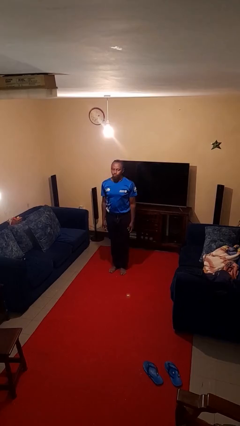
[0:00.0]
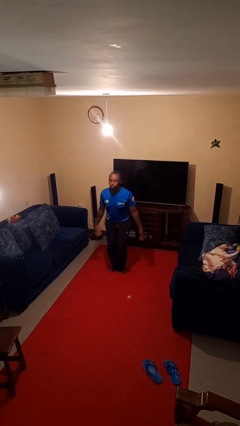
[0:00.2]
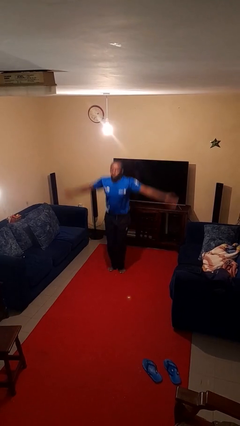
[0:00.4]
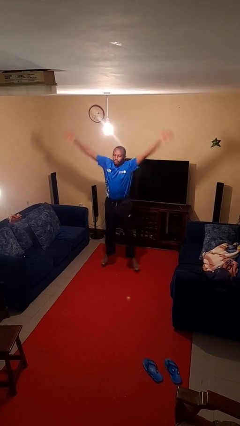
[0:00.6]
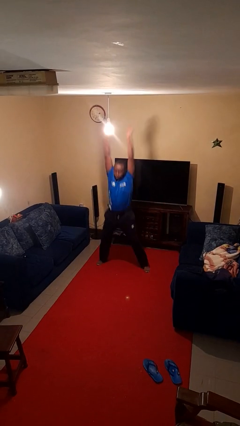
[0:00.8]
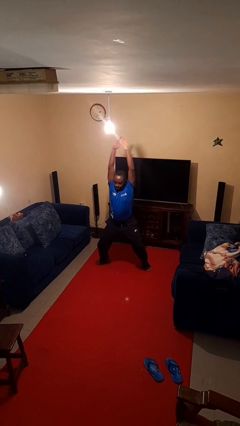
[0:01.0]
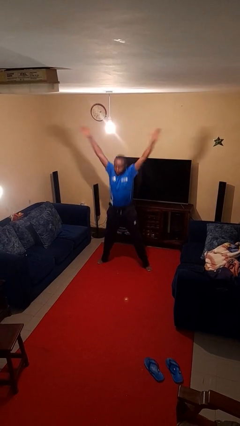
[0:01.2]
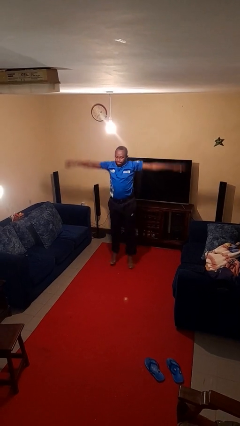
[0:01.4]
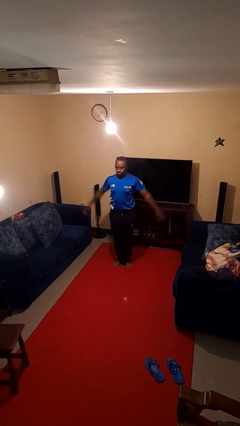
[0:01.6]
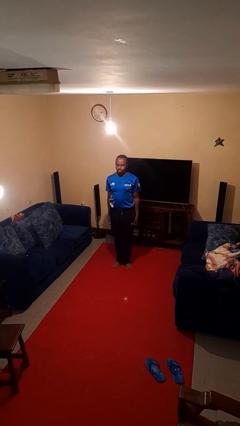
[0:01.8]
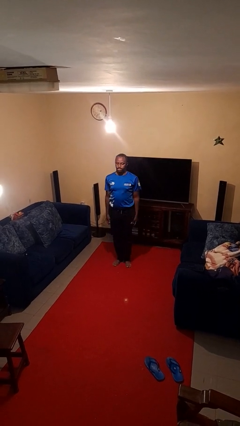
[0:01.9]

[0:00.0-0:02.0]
person exercises with jumping jacks

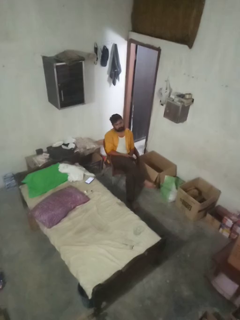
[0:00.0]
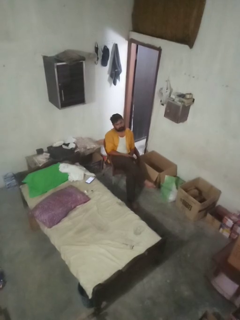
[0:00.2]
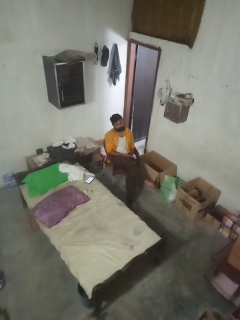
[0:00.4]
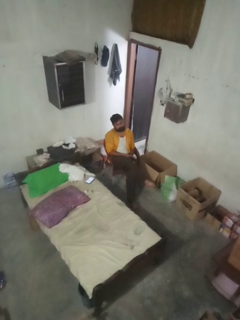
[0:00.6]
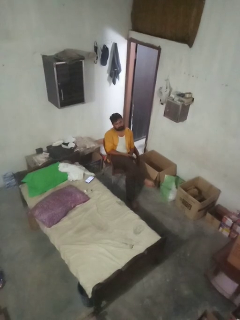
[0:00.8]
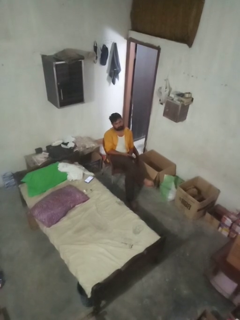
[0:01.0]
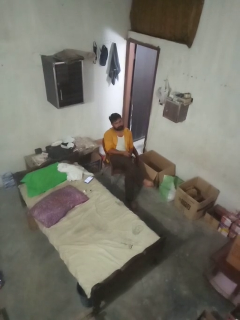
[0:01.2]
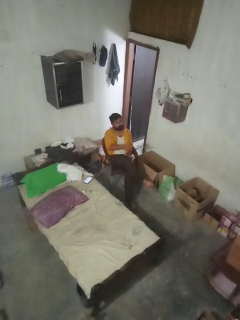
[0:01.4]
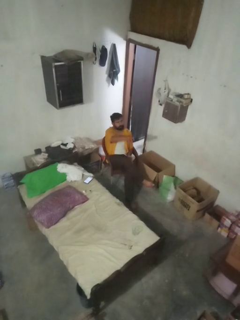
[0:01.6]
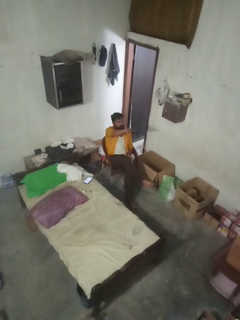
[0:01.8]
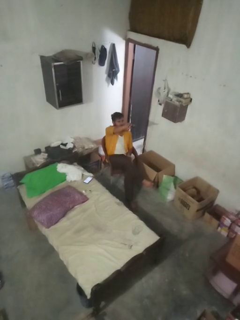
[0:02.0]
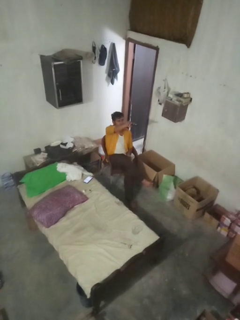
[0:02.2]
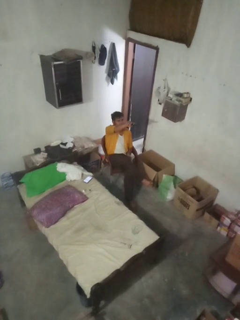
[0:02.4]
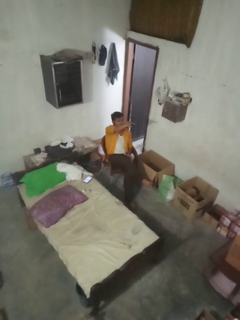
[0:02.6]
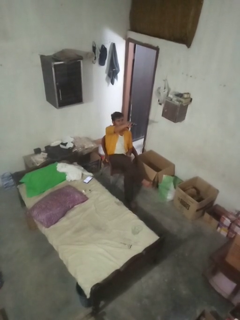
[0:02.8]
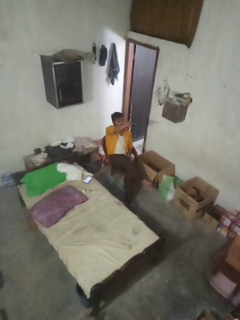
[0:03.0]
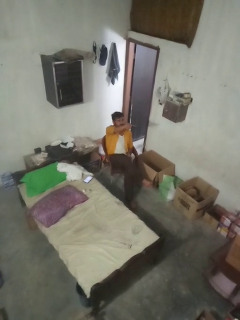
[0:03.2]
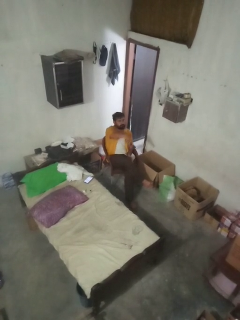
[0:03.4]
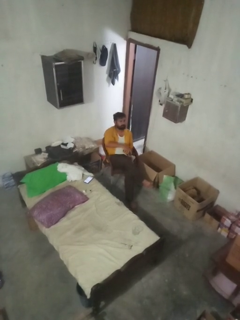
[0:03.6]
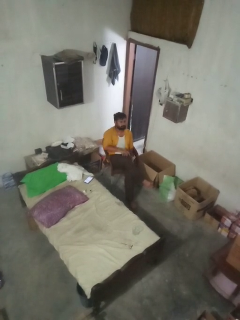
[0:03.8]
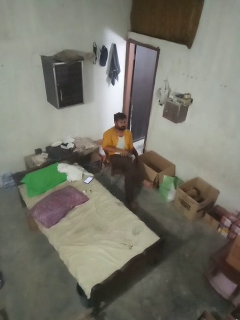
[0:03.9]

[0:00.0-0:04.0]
person uses television remote

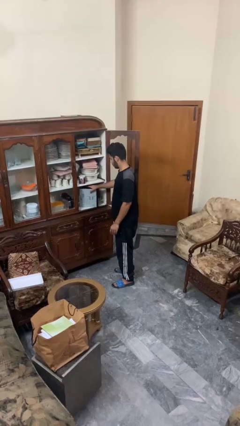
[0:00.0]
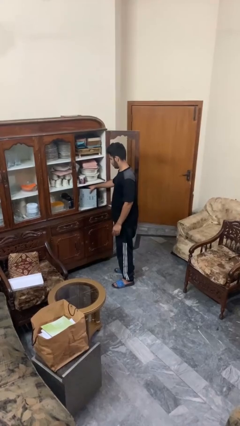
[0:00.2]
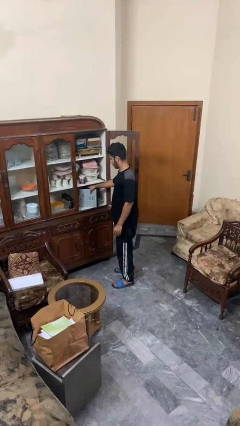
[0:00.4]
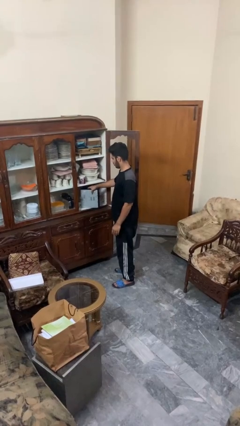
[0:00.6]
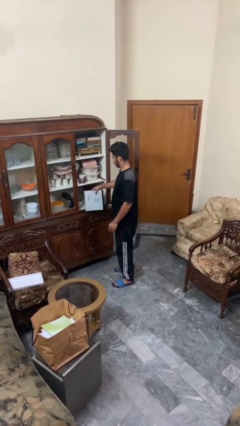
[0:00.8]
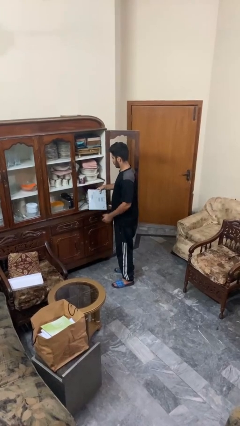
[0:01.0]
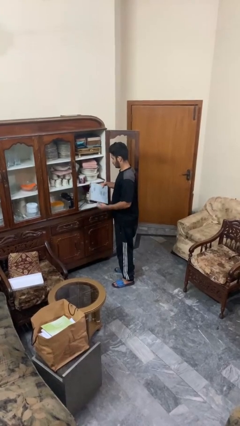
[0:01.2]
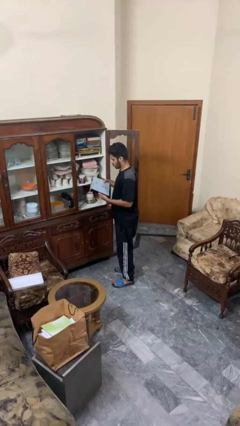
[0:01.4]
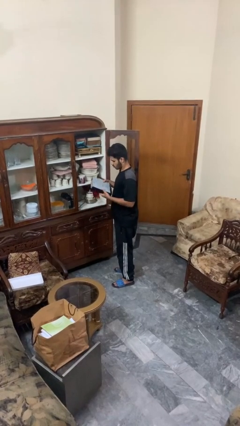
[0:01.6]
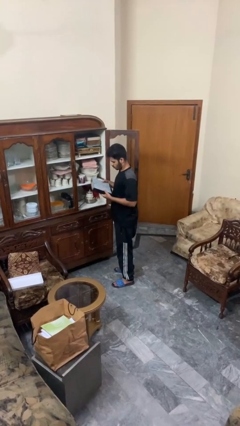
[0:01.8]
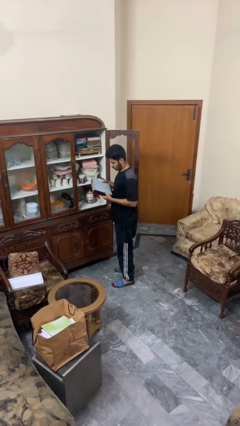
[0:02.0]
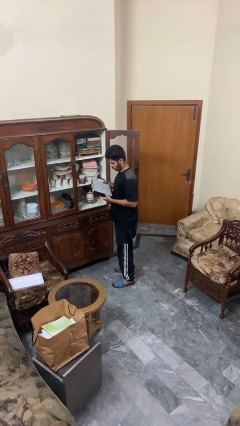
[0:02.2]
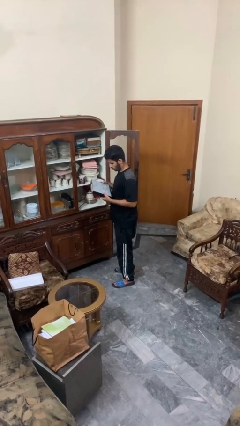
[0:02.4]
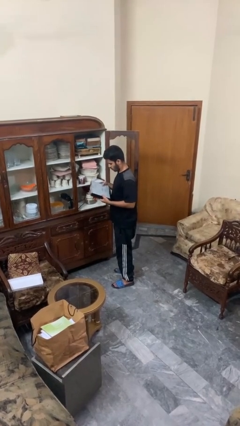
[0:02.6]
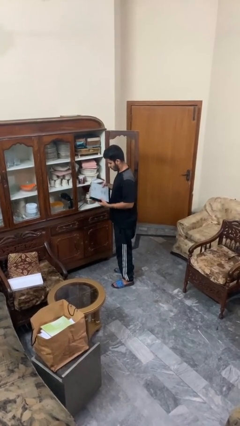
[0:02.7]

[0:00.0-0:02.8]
person picks up object from cabinet

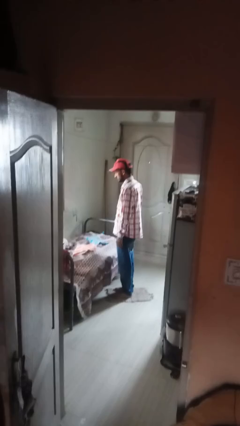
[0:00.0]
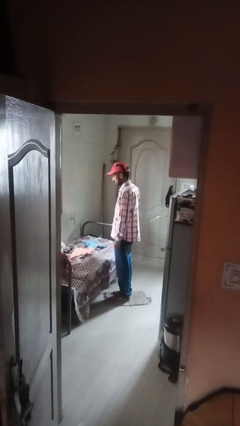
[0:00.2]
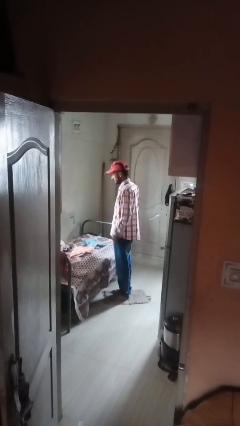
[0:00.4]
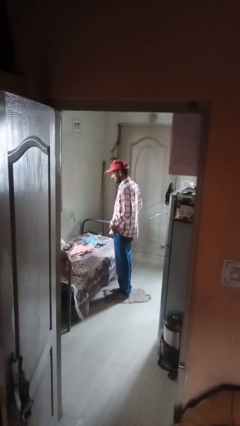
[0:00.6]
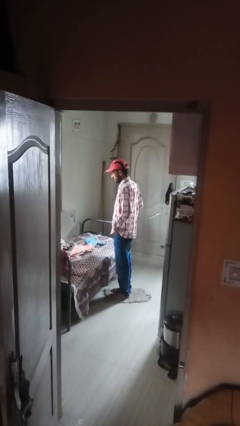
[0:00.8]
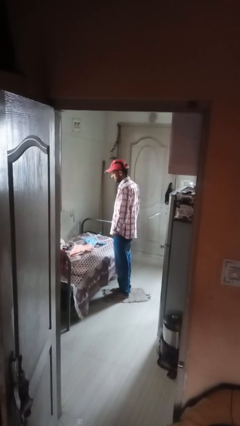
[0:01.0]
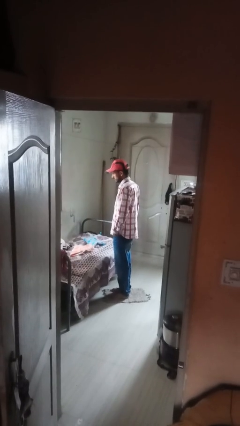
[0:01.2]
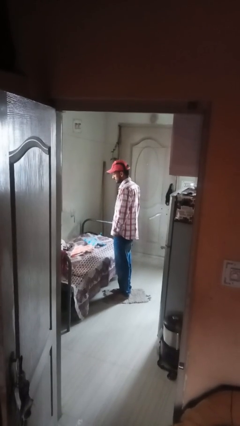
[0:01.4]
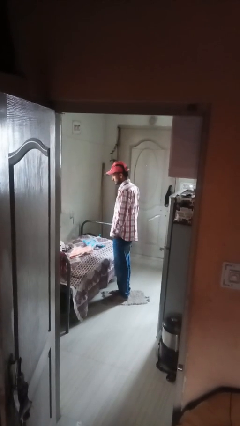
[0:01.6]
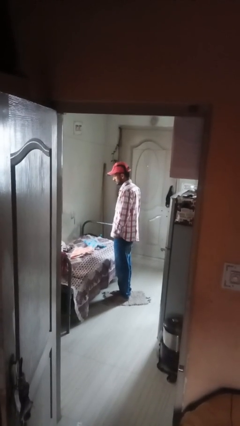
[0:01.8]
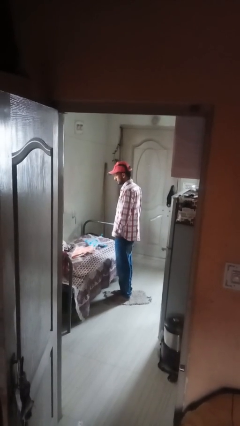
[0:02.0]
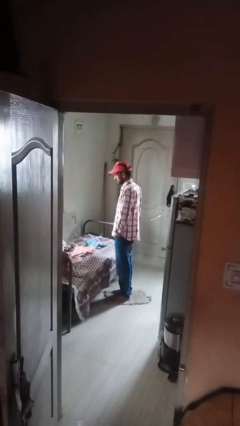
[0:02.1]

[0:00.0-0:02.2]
person puts hands in back pockets

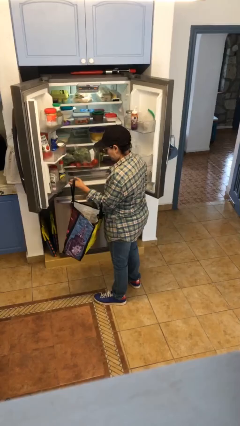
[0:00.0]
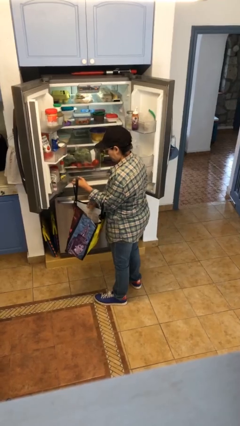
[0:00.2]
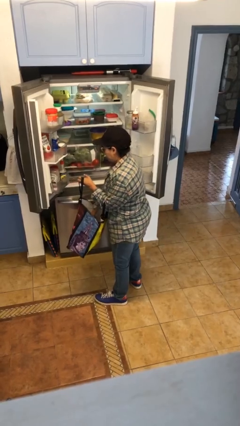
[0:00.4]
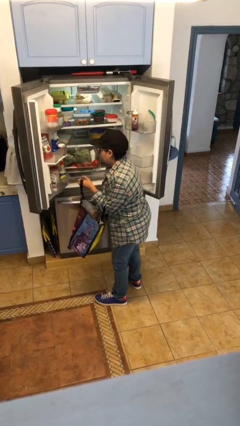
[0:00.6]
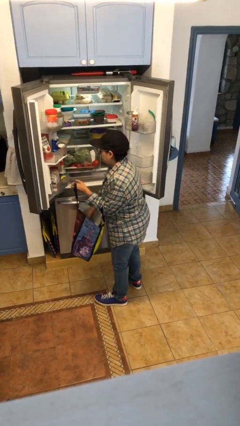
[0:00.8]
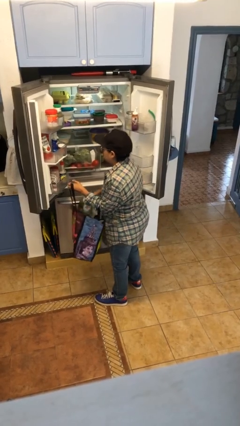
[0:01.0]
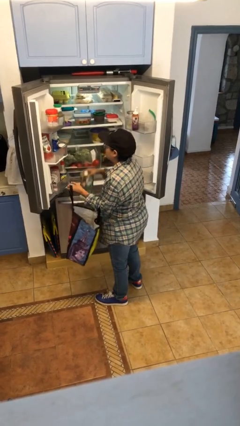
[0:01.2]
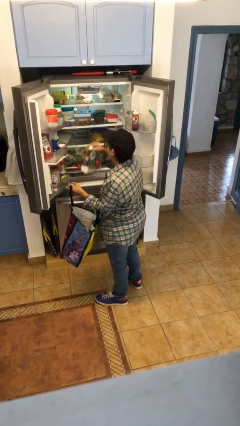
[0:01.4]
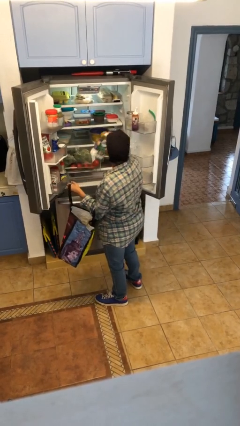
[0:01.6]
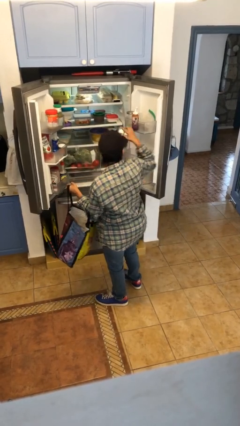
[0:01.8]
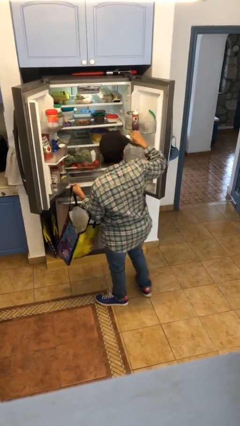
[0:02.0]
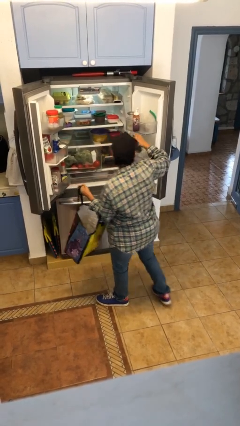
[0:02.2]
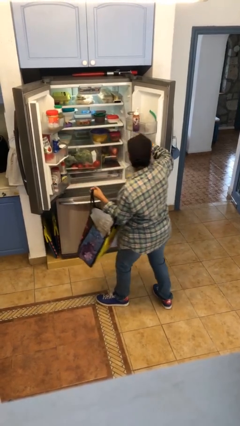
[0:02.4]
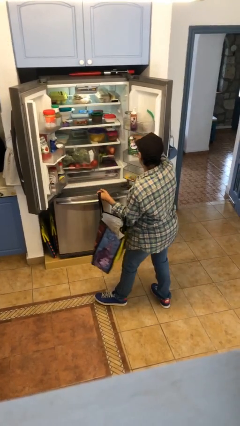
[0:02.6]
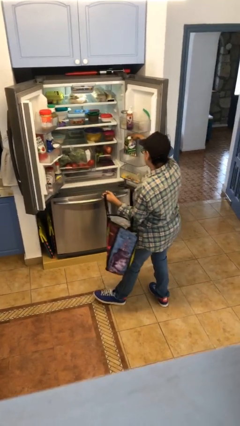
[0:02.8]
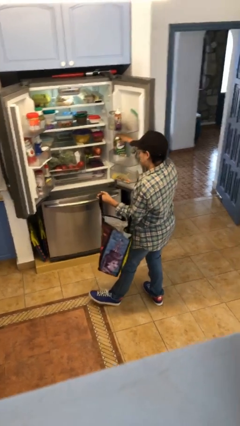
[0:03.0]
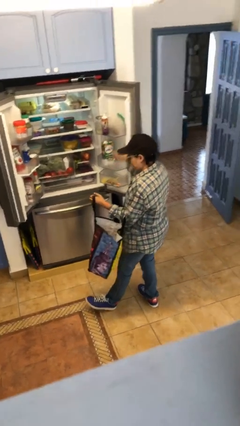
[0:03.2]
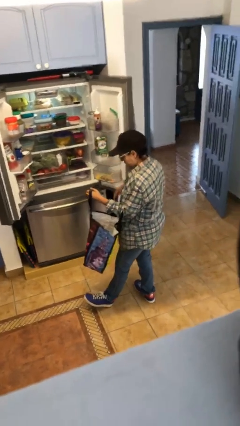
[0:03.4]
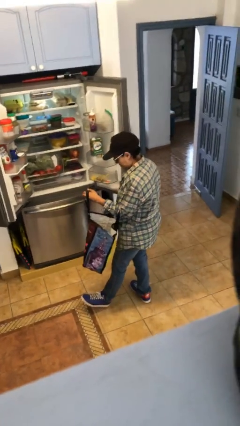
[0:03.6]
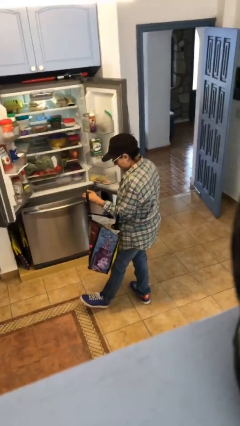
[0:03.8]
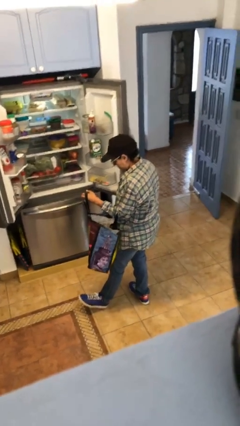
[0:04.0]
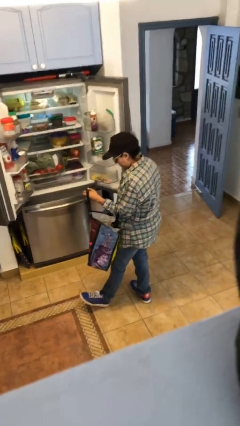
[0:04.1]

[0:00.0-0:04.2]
person loads groceries into refrigerator

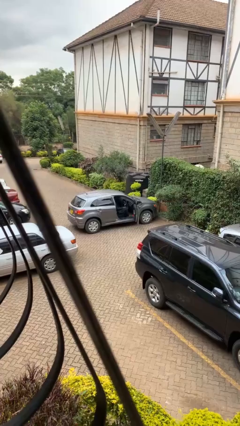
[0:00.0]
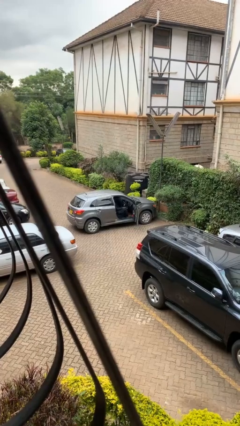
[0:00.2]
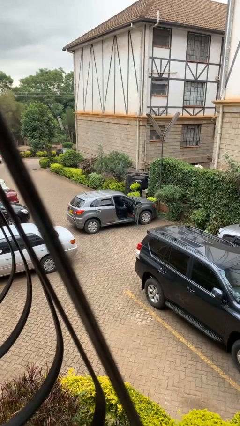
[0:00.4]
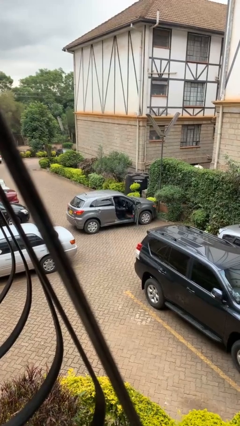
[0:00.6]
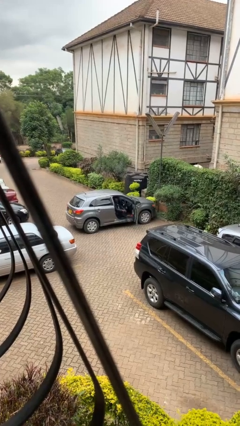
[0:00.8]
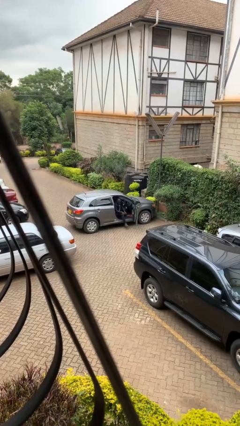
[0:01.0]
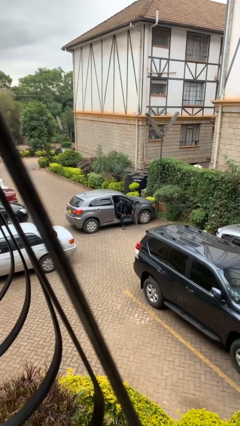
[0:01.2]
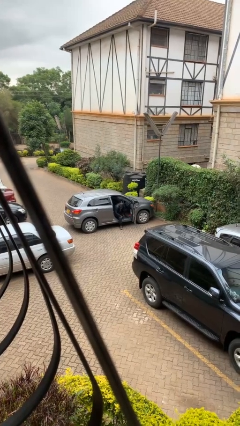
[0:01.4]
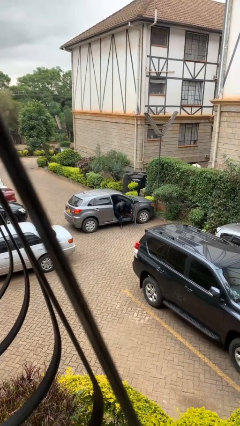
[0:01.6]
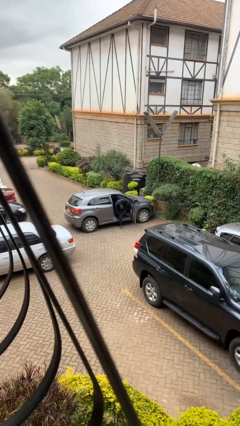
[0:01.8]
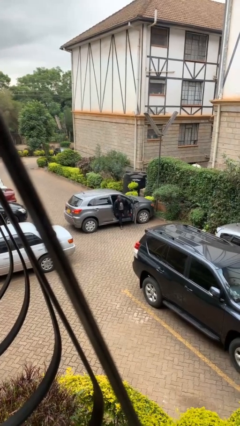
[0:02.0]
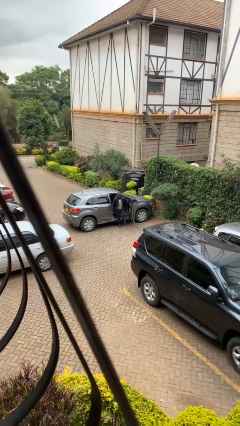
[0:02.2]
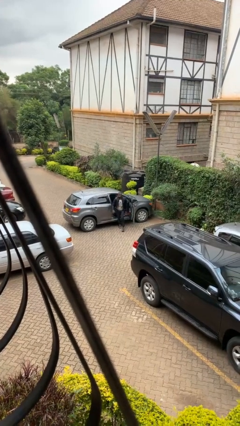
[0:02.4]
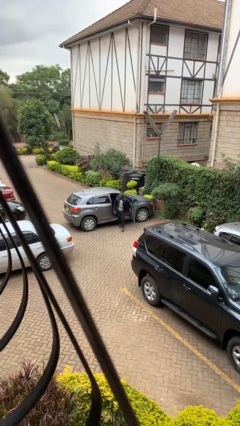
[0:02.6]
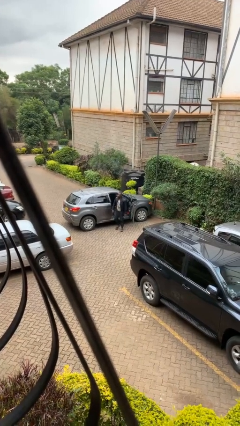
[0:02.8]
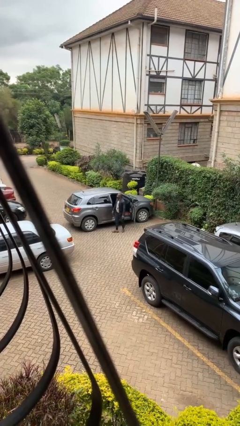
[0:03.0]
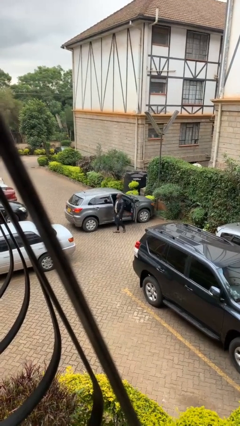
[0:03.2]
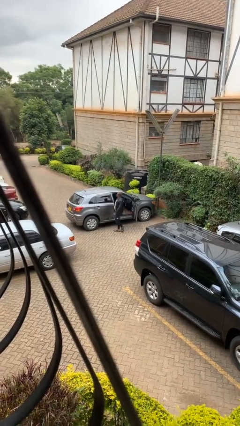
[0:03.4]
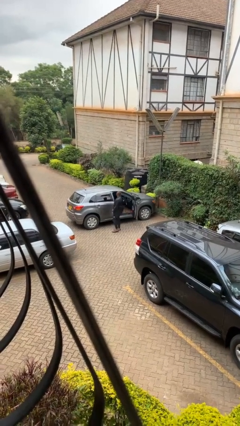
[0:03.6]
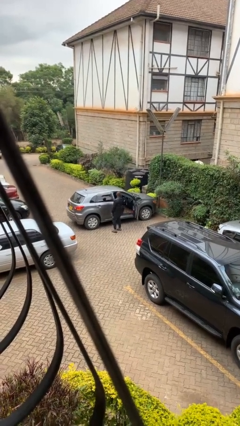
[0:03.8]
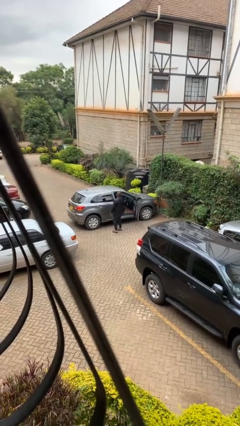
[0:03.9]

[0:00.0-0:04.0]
person exits car
